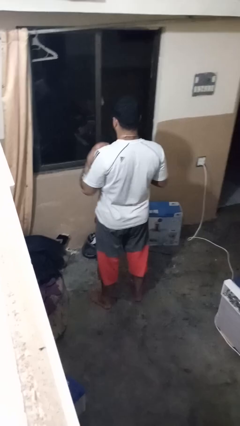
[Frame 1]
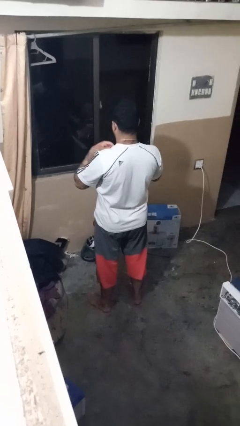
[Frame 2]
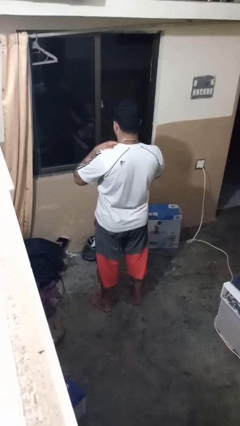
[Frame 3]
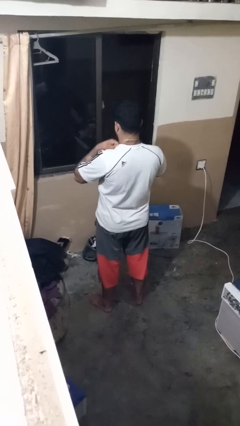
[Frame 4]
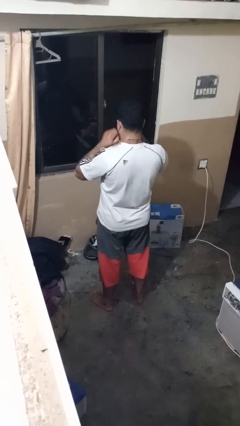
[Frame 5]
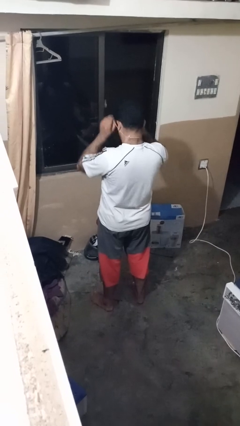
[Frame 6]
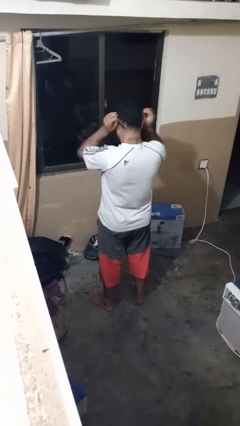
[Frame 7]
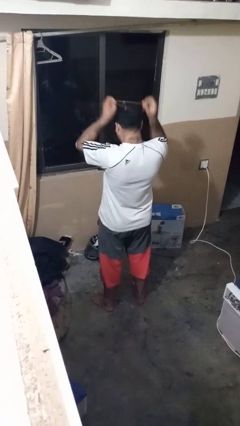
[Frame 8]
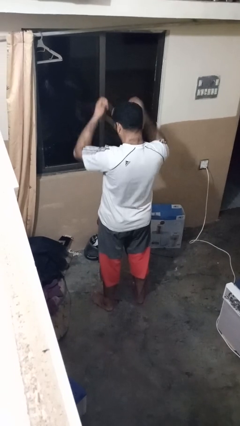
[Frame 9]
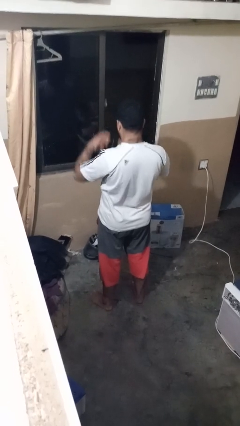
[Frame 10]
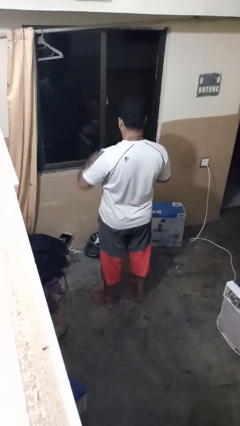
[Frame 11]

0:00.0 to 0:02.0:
person takes off necklace

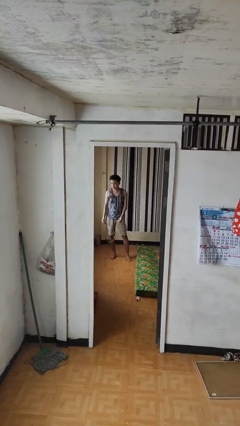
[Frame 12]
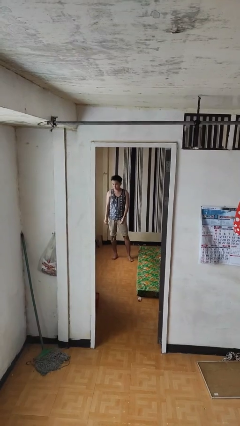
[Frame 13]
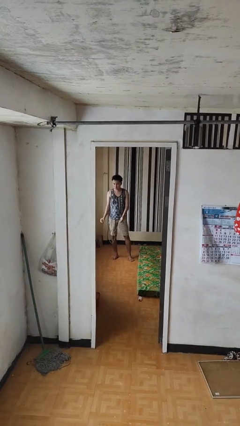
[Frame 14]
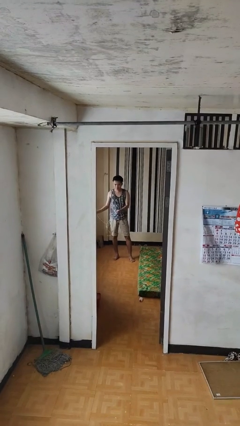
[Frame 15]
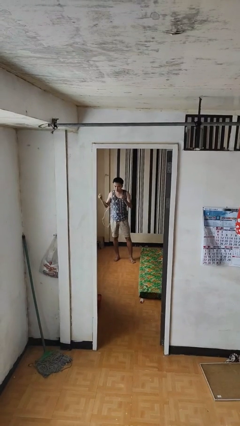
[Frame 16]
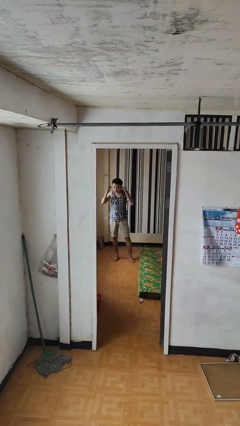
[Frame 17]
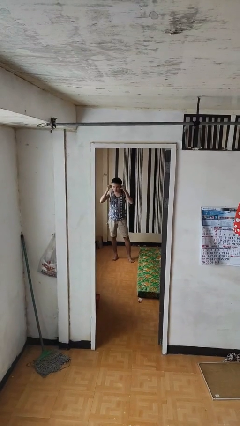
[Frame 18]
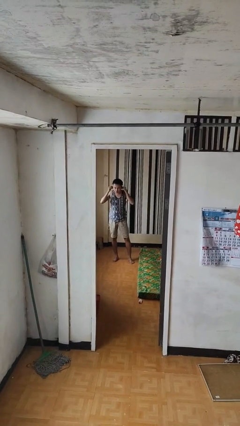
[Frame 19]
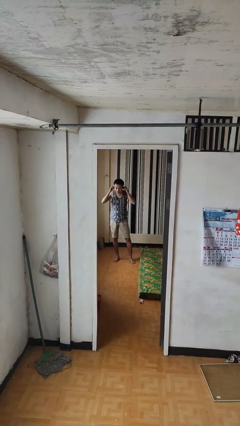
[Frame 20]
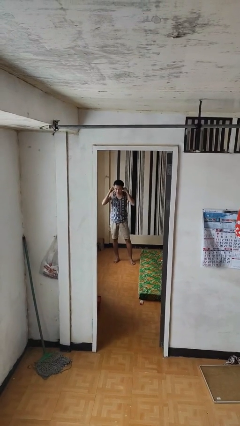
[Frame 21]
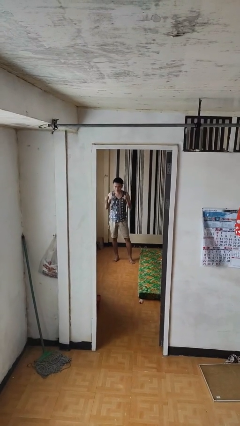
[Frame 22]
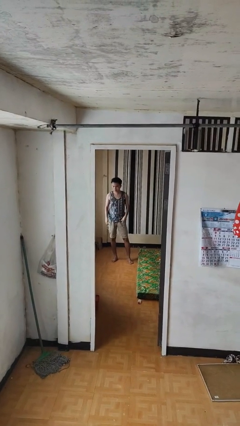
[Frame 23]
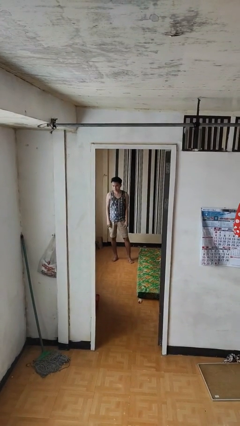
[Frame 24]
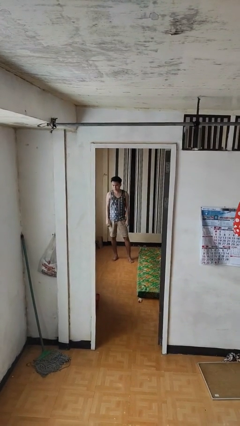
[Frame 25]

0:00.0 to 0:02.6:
person puts on headphones

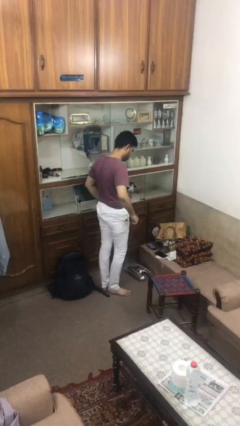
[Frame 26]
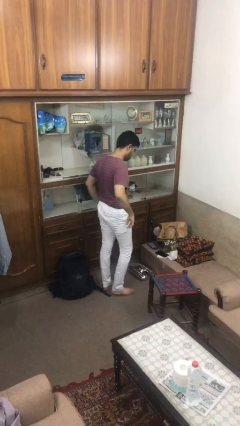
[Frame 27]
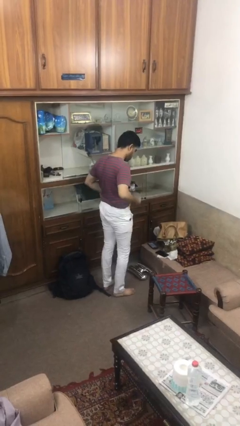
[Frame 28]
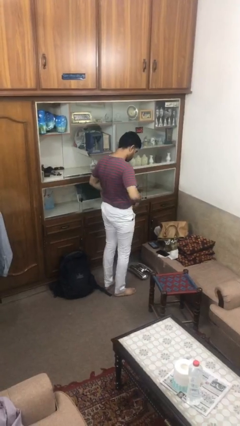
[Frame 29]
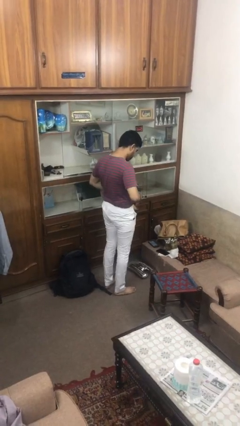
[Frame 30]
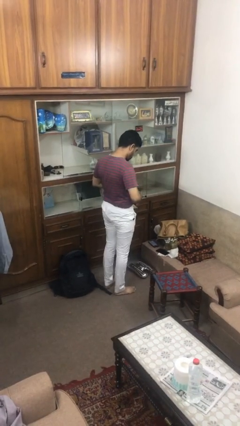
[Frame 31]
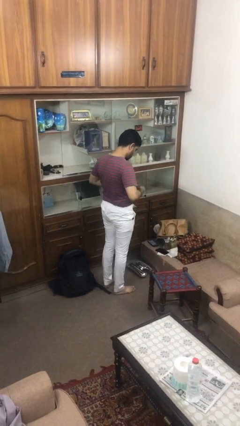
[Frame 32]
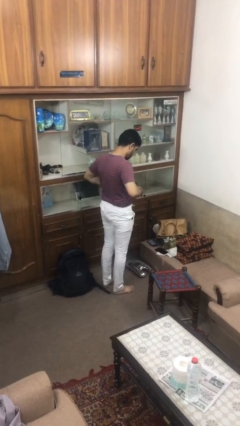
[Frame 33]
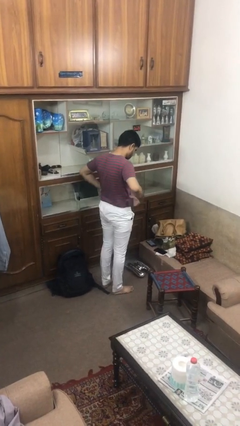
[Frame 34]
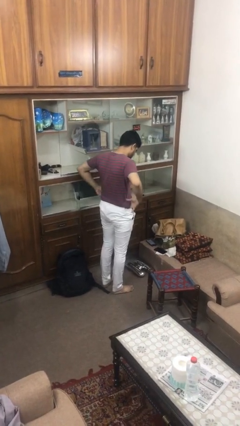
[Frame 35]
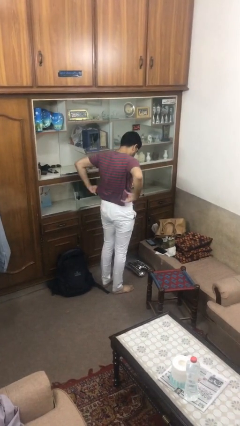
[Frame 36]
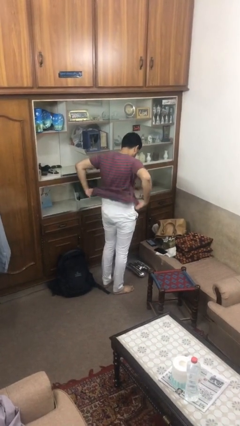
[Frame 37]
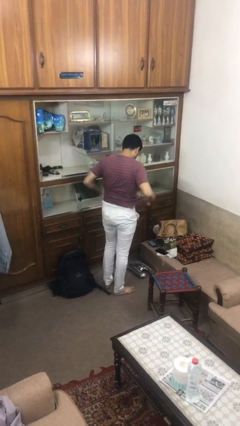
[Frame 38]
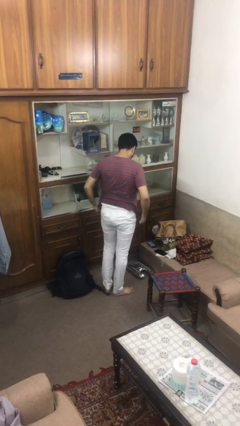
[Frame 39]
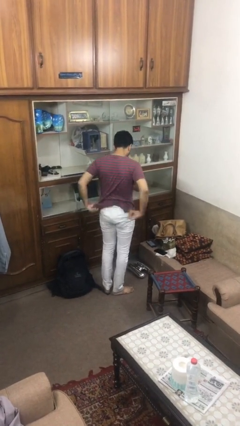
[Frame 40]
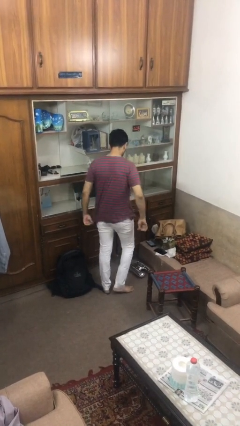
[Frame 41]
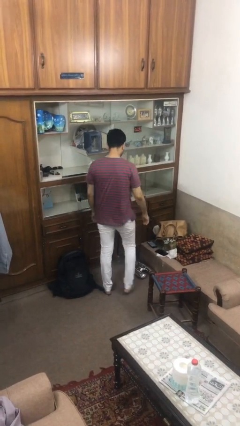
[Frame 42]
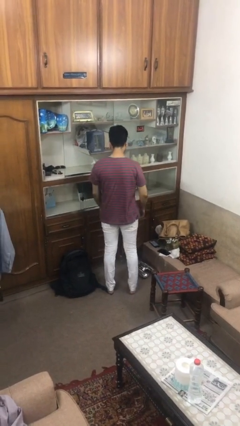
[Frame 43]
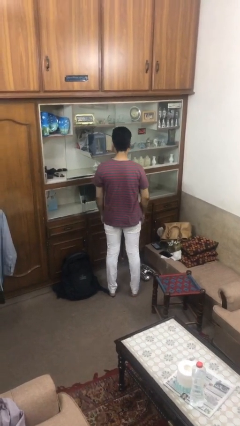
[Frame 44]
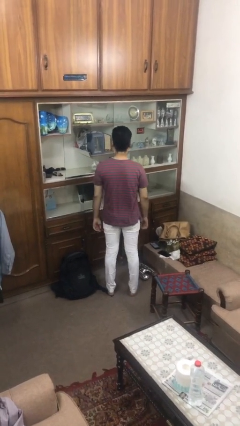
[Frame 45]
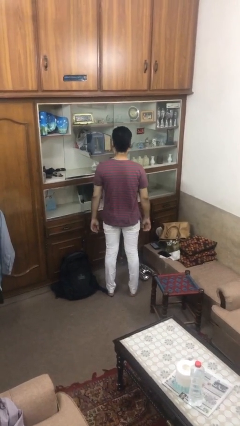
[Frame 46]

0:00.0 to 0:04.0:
person untucks shirt

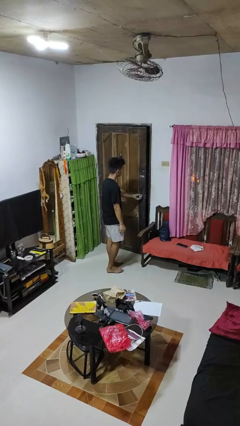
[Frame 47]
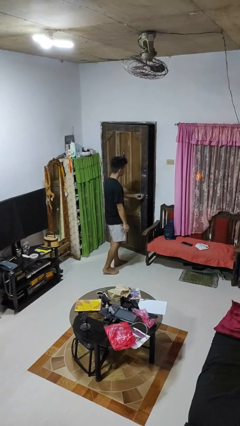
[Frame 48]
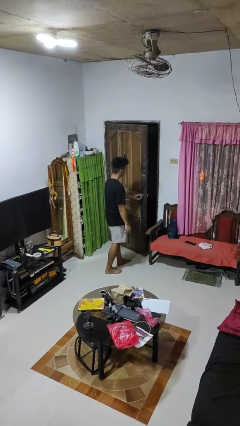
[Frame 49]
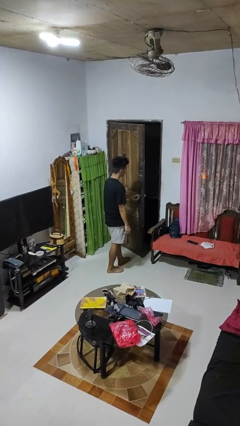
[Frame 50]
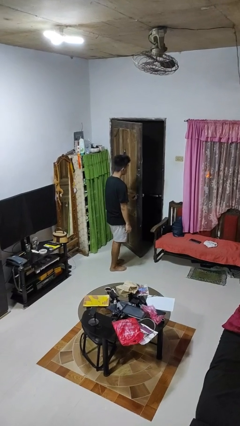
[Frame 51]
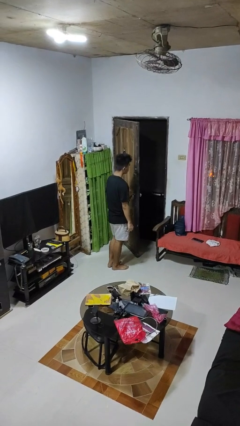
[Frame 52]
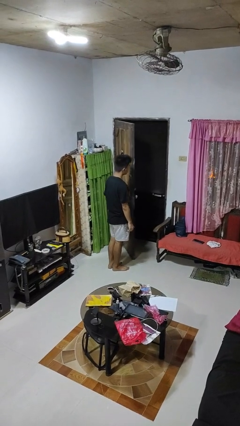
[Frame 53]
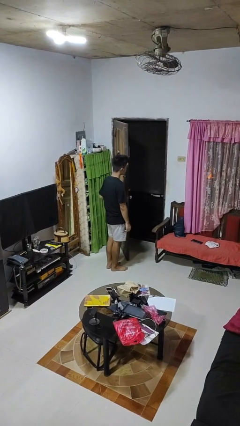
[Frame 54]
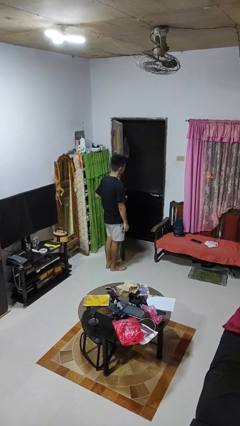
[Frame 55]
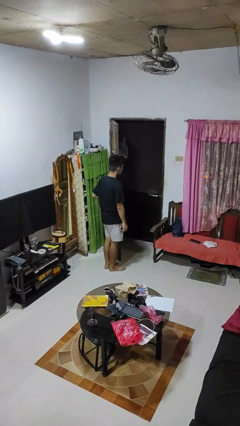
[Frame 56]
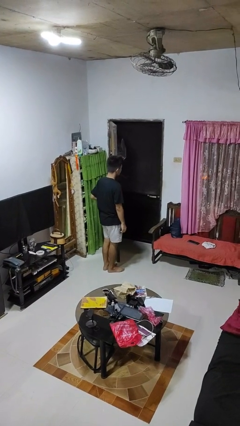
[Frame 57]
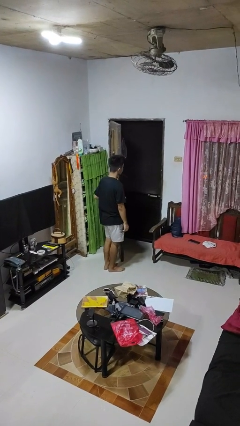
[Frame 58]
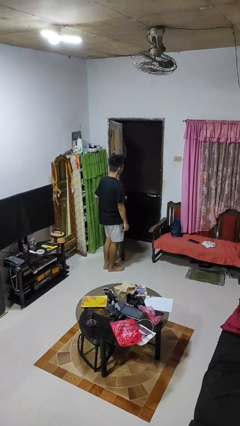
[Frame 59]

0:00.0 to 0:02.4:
person opens facility door

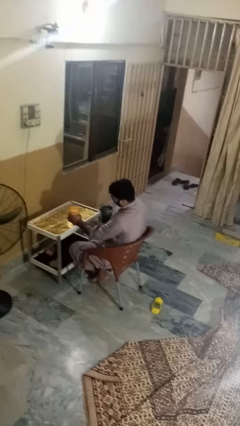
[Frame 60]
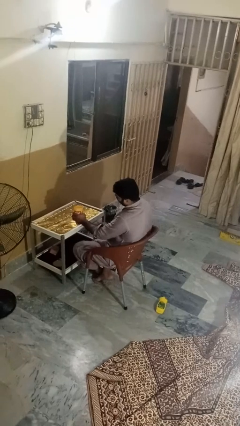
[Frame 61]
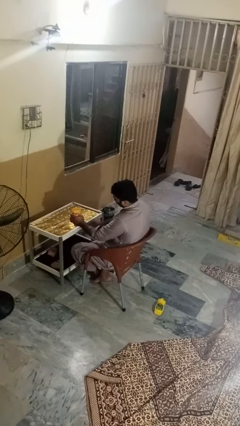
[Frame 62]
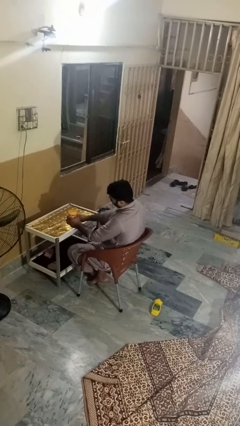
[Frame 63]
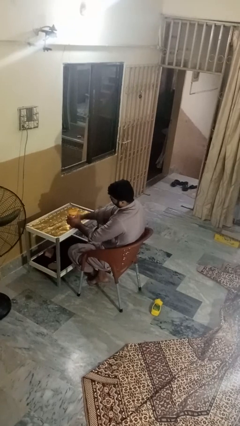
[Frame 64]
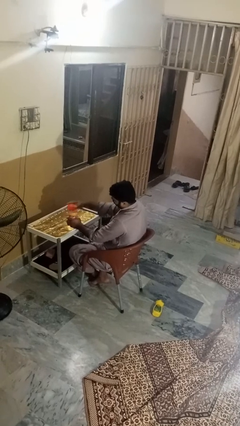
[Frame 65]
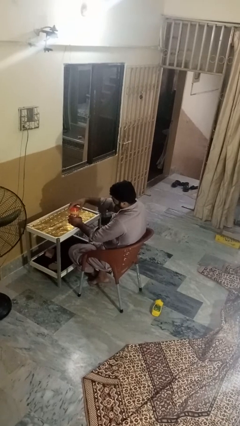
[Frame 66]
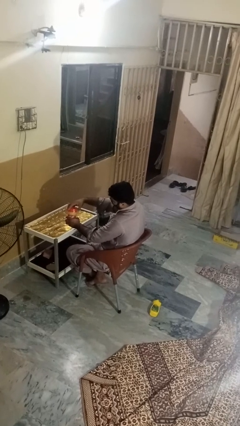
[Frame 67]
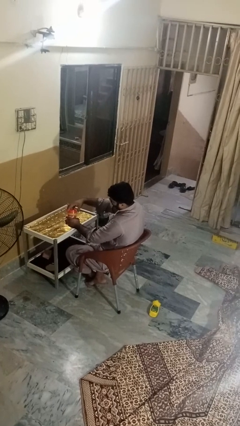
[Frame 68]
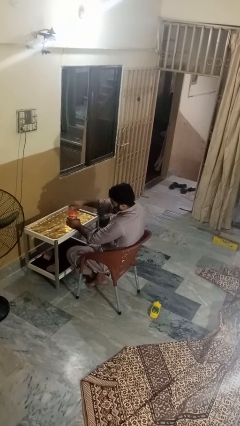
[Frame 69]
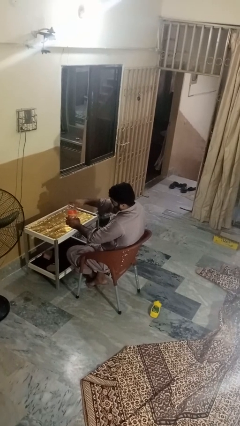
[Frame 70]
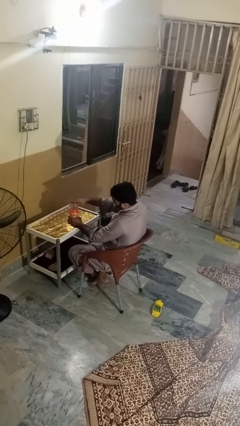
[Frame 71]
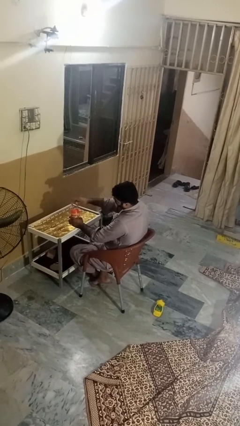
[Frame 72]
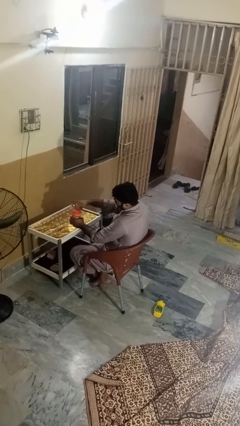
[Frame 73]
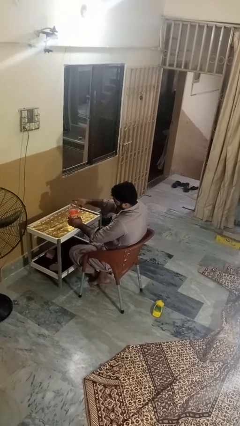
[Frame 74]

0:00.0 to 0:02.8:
person closes jar

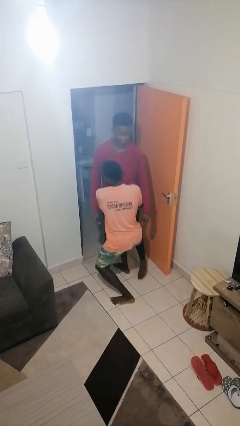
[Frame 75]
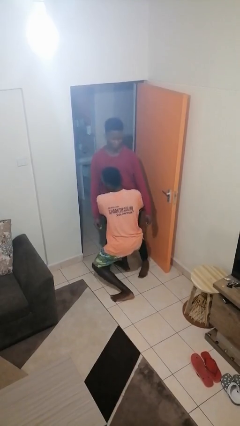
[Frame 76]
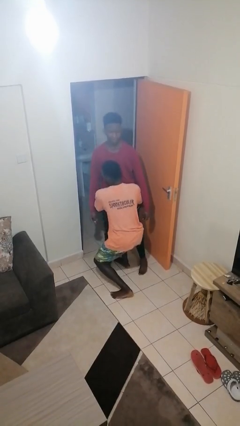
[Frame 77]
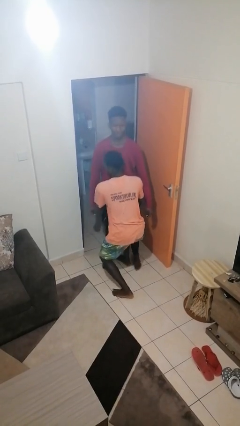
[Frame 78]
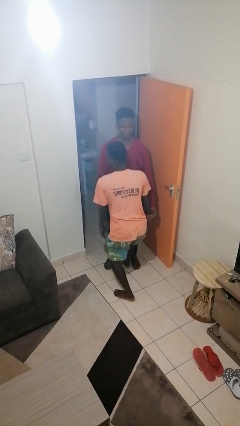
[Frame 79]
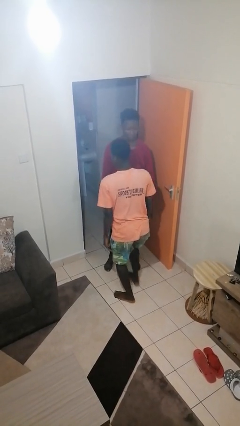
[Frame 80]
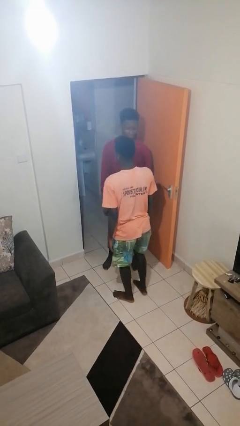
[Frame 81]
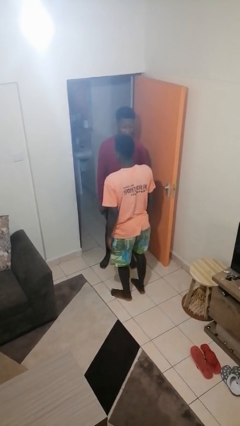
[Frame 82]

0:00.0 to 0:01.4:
person puts down person

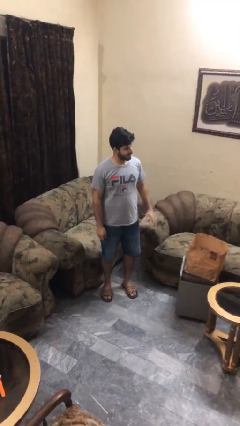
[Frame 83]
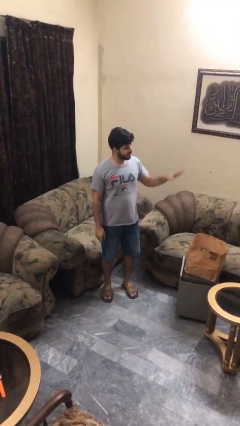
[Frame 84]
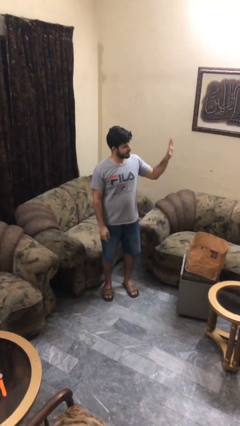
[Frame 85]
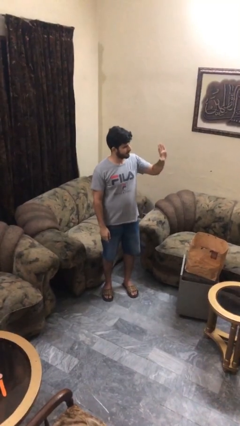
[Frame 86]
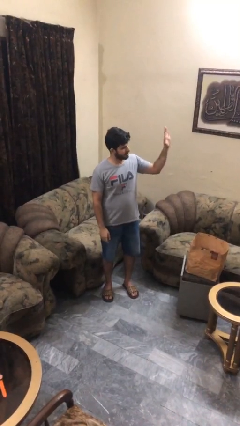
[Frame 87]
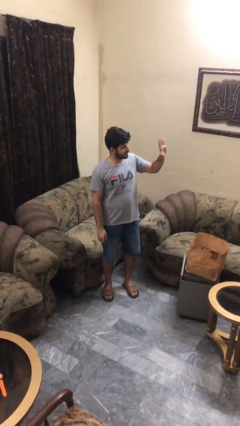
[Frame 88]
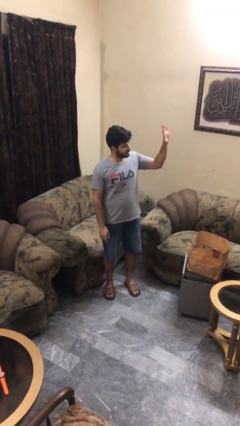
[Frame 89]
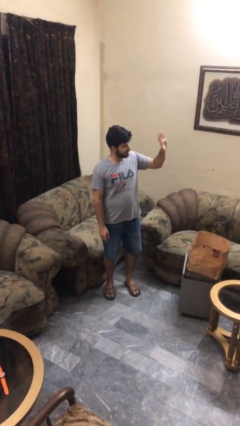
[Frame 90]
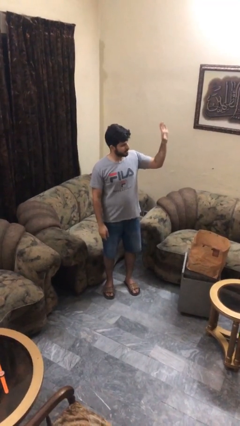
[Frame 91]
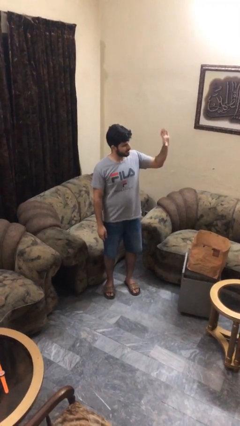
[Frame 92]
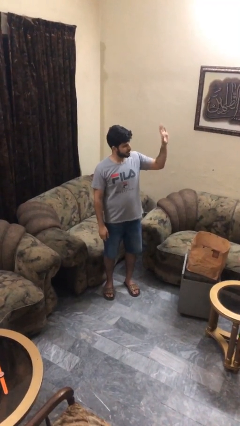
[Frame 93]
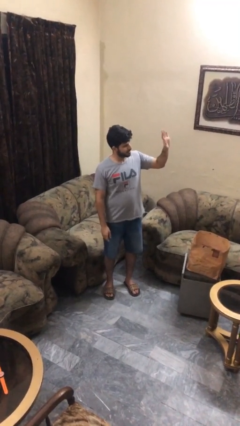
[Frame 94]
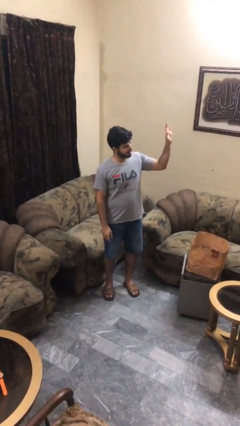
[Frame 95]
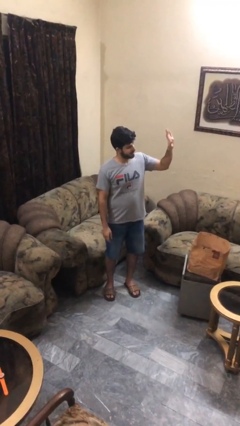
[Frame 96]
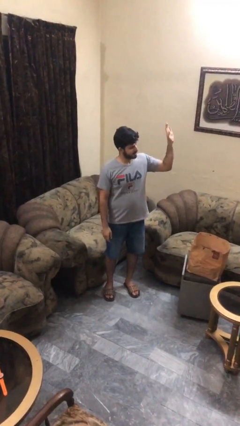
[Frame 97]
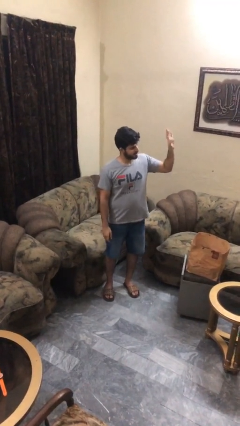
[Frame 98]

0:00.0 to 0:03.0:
person waves at person
